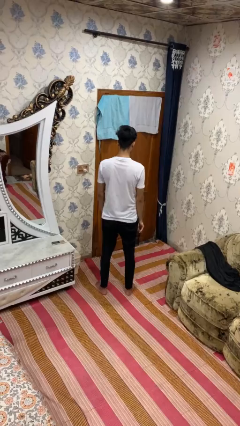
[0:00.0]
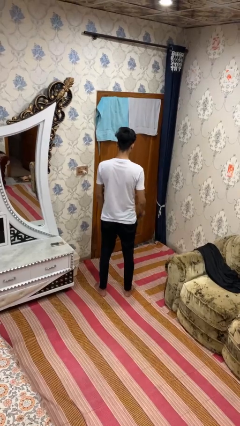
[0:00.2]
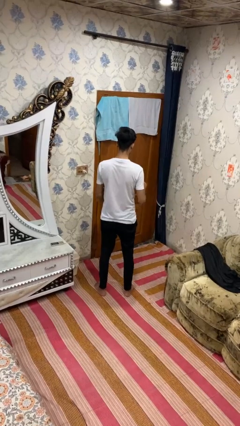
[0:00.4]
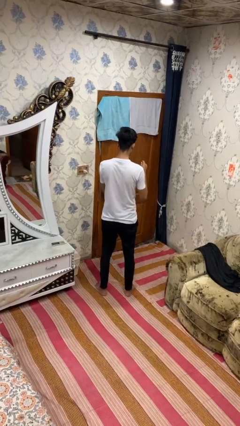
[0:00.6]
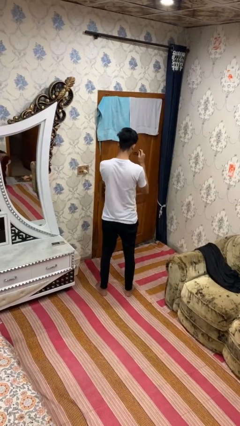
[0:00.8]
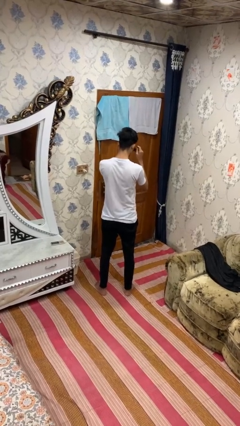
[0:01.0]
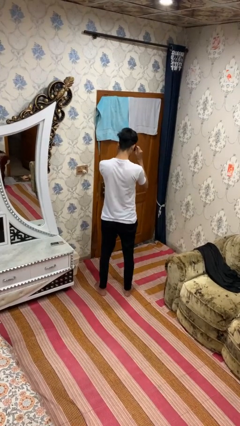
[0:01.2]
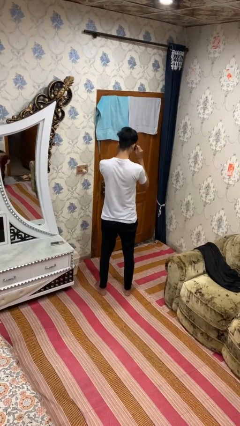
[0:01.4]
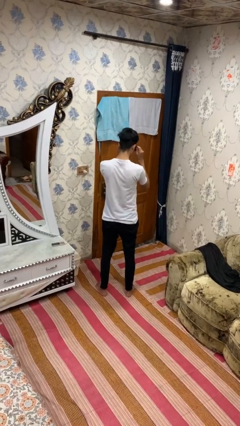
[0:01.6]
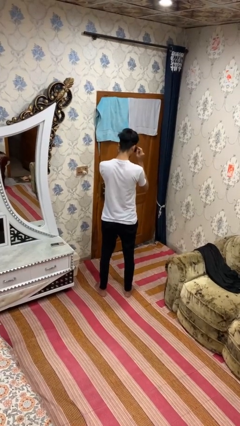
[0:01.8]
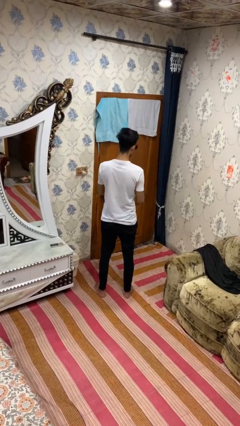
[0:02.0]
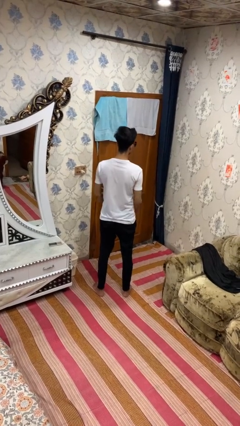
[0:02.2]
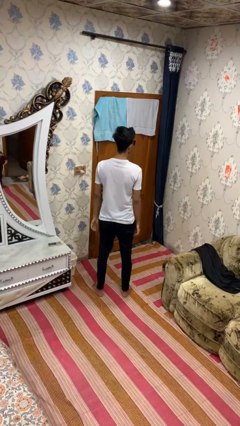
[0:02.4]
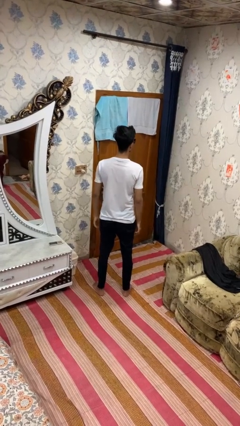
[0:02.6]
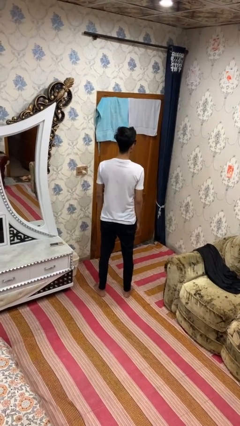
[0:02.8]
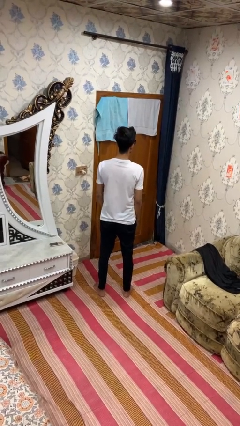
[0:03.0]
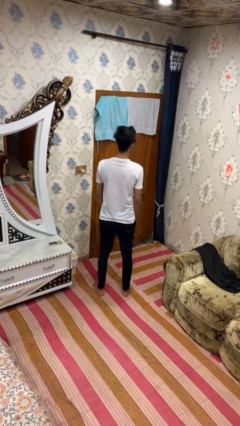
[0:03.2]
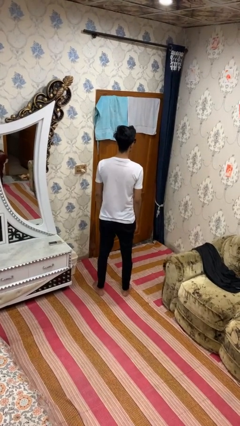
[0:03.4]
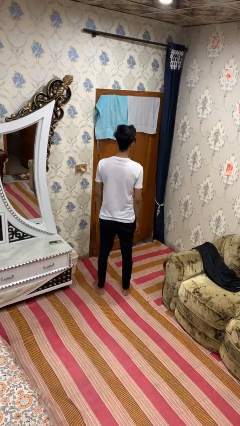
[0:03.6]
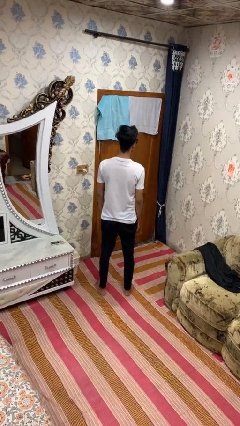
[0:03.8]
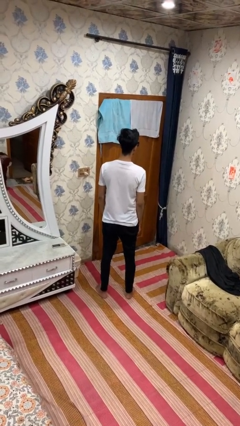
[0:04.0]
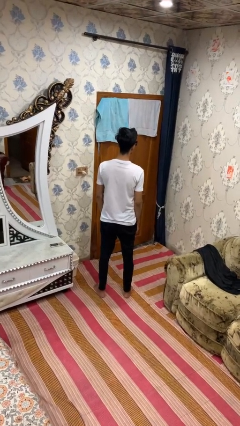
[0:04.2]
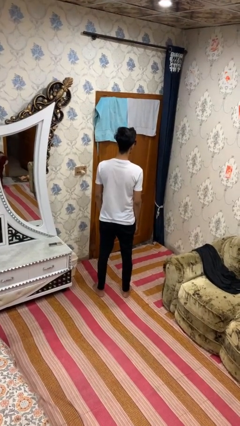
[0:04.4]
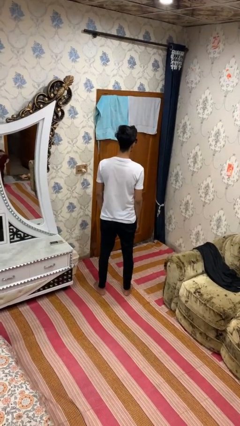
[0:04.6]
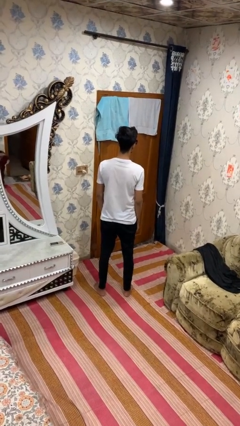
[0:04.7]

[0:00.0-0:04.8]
person puts on sunglasses

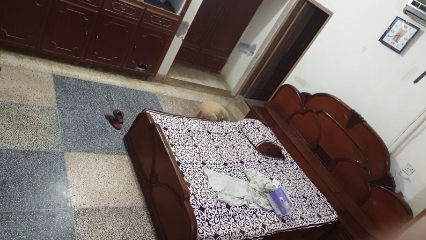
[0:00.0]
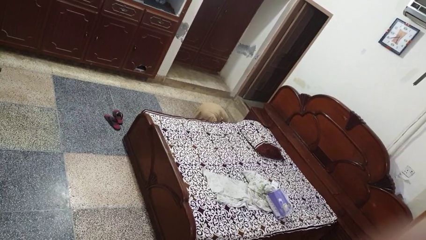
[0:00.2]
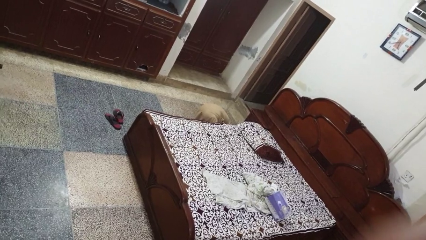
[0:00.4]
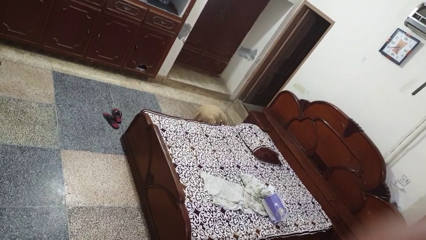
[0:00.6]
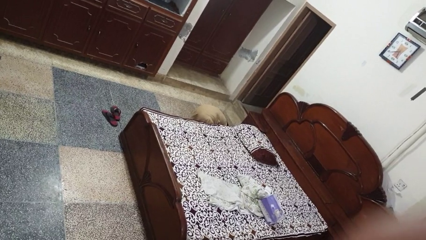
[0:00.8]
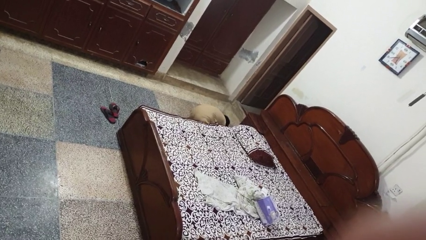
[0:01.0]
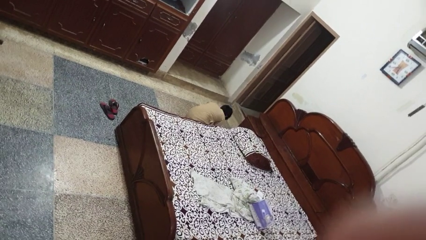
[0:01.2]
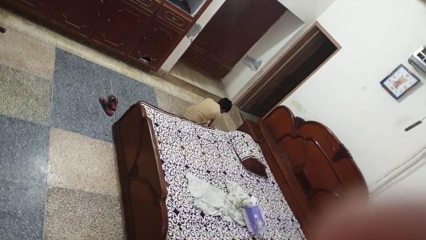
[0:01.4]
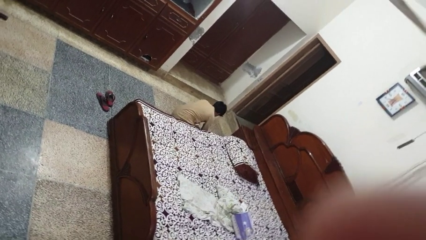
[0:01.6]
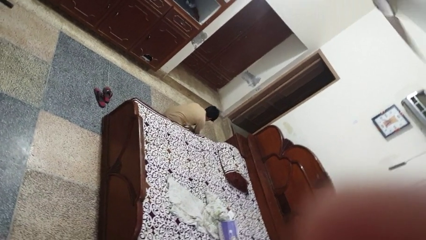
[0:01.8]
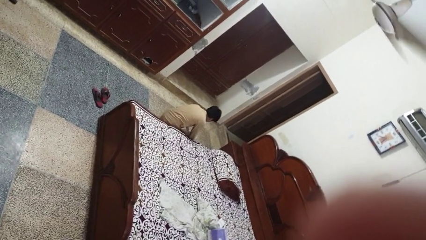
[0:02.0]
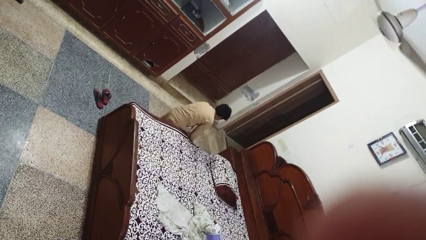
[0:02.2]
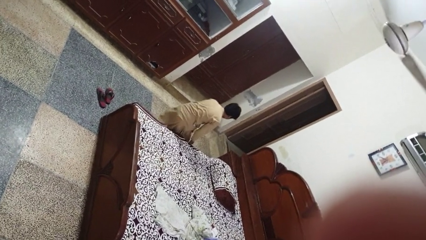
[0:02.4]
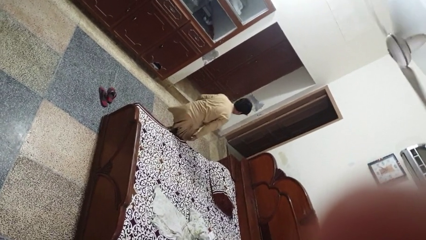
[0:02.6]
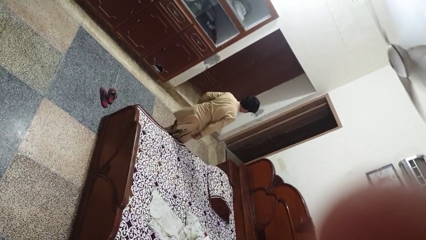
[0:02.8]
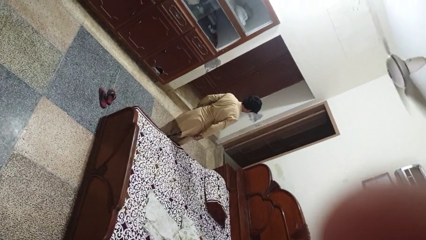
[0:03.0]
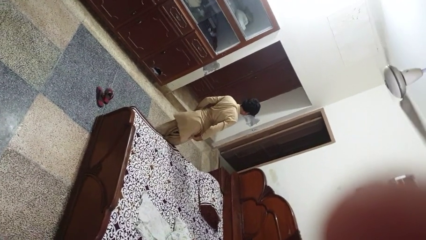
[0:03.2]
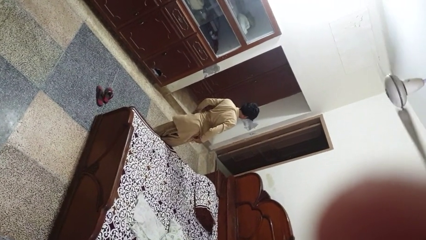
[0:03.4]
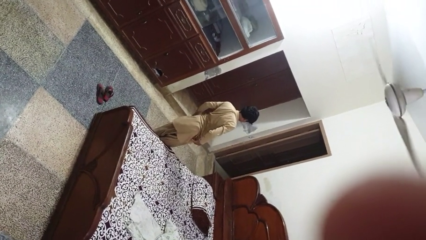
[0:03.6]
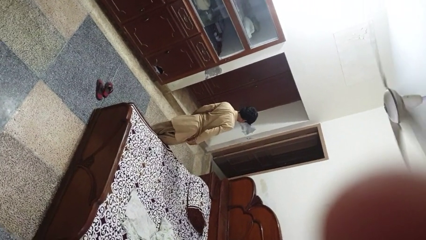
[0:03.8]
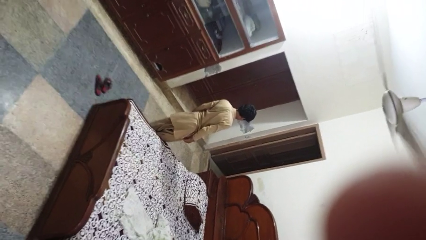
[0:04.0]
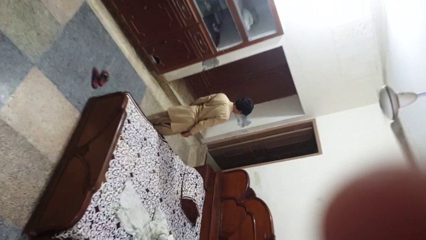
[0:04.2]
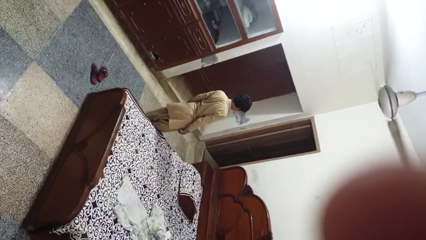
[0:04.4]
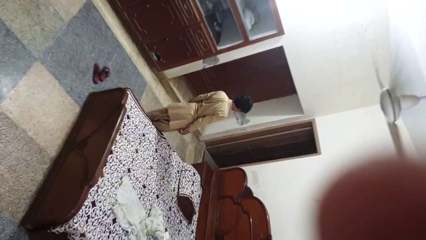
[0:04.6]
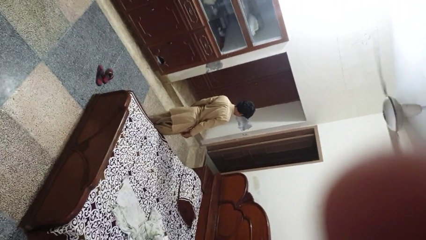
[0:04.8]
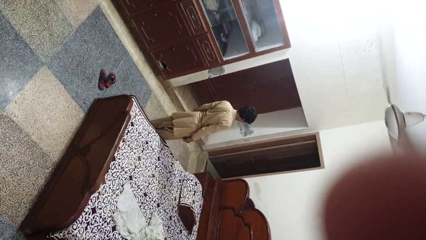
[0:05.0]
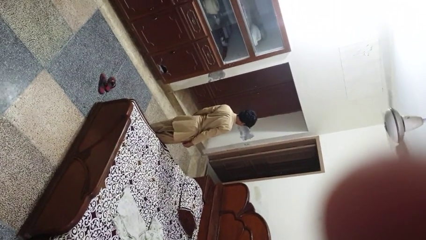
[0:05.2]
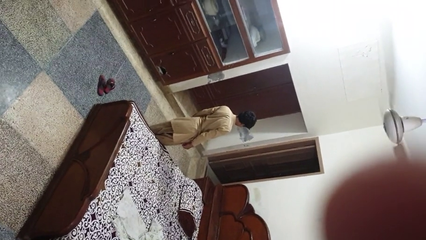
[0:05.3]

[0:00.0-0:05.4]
person stands up from floor

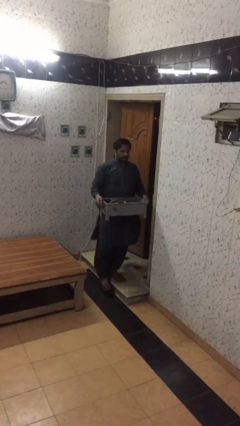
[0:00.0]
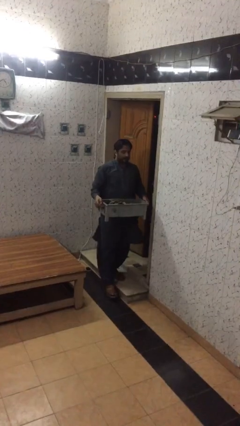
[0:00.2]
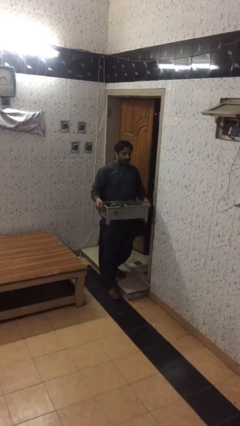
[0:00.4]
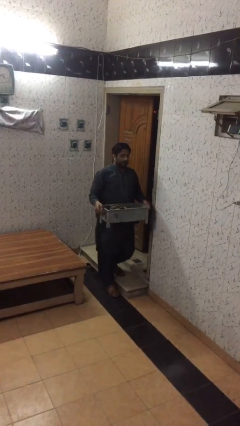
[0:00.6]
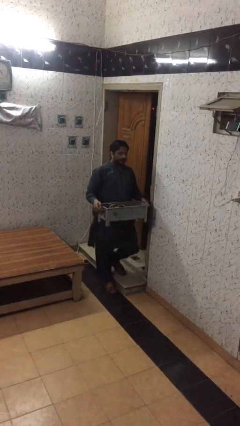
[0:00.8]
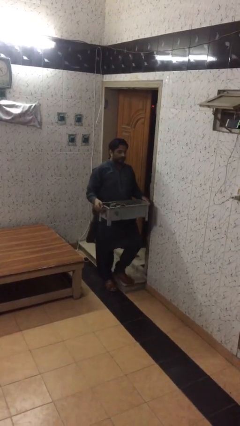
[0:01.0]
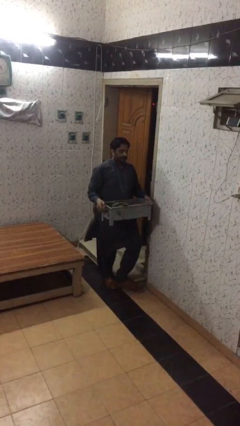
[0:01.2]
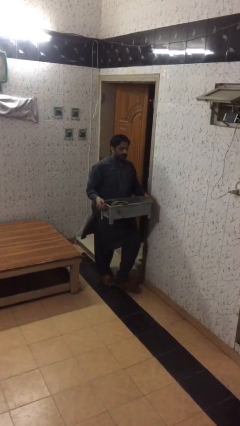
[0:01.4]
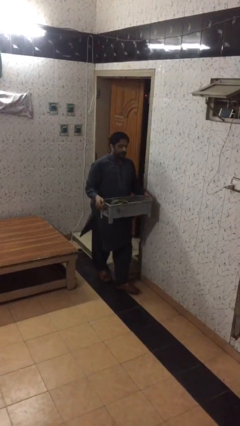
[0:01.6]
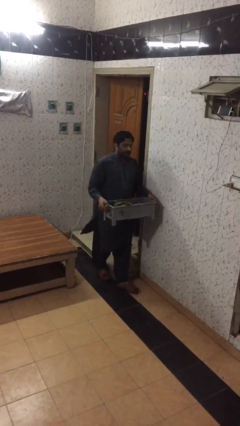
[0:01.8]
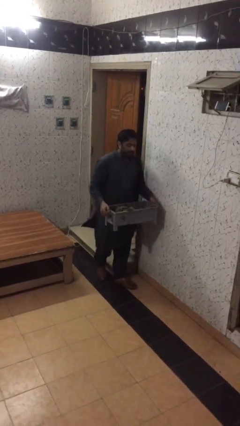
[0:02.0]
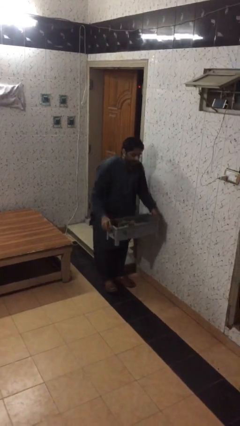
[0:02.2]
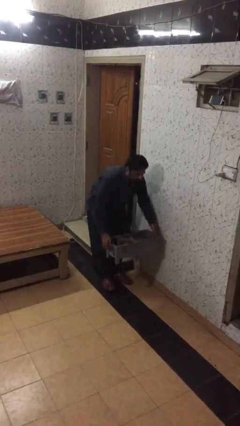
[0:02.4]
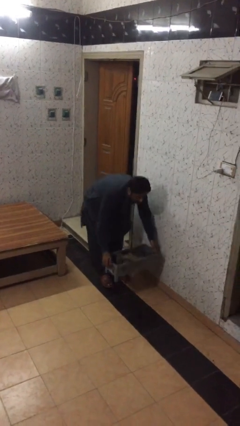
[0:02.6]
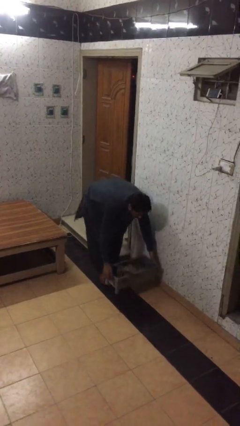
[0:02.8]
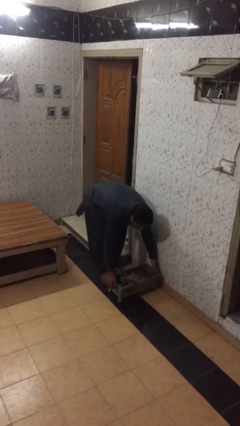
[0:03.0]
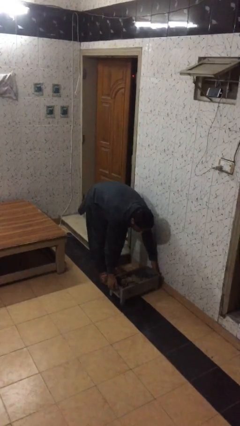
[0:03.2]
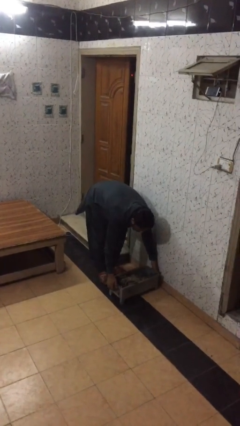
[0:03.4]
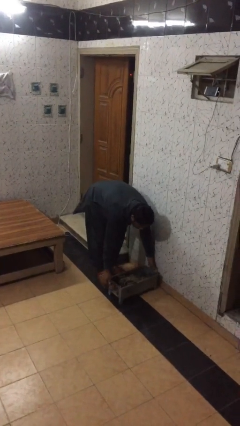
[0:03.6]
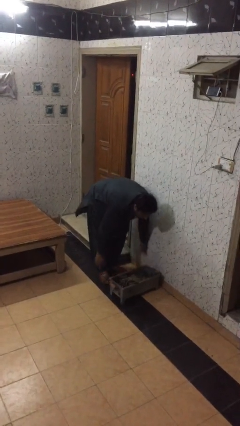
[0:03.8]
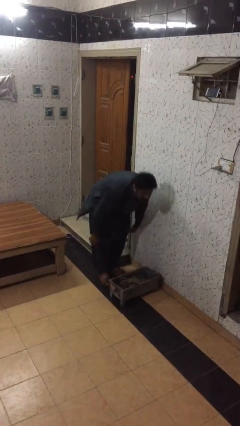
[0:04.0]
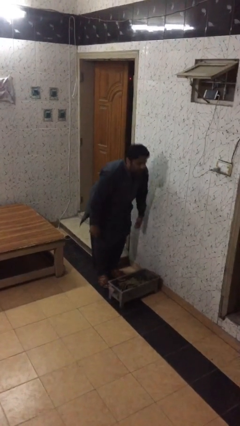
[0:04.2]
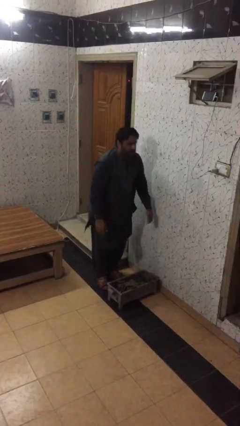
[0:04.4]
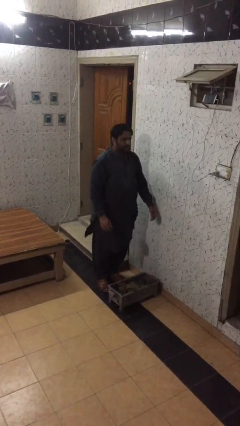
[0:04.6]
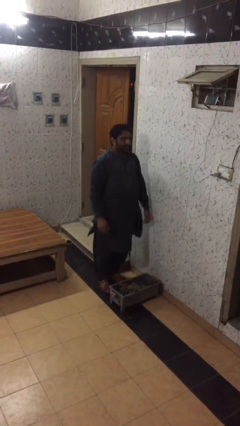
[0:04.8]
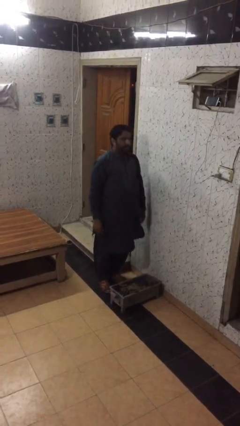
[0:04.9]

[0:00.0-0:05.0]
person puts down object on floor

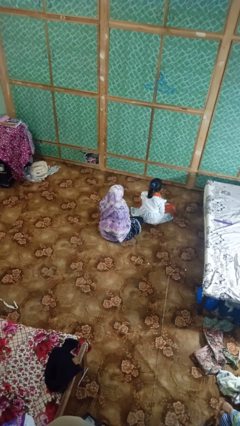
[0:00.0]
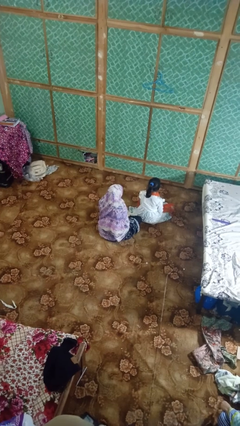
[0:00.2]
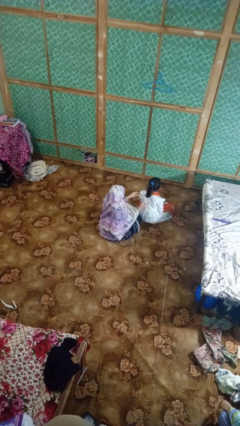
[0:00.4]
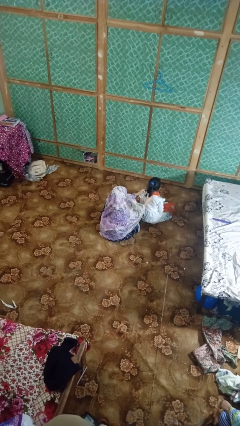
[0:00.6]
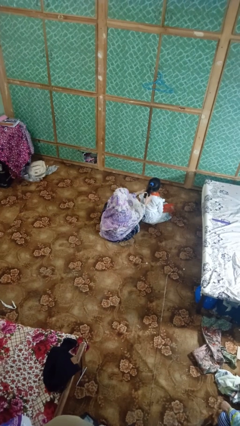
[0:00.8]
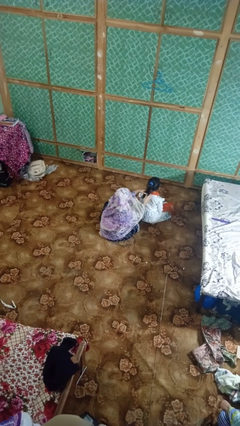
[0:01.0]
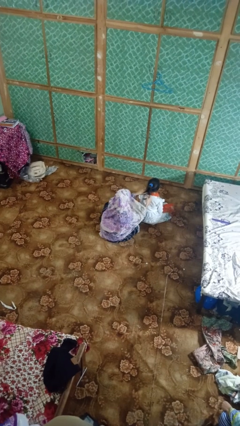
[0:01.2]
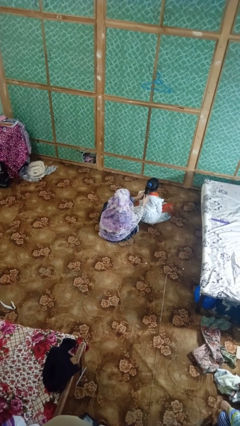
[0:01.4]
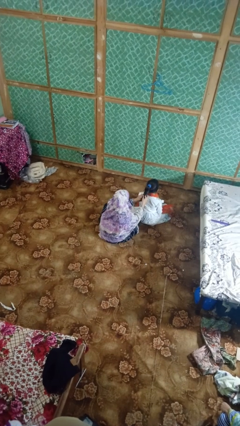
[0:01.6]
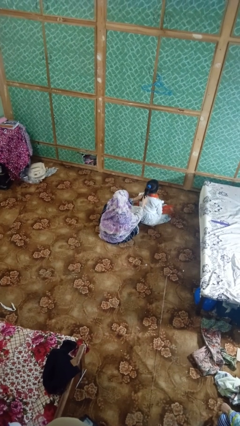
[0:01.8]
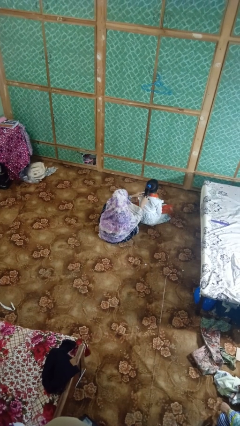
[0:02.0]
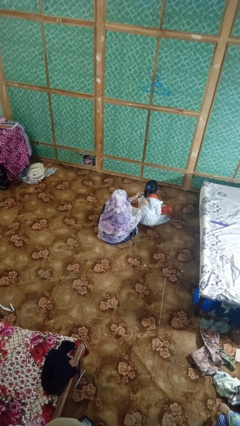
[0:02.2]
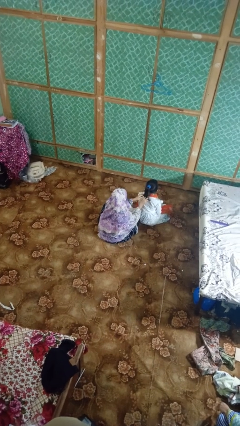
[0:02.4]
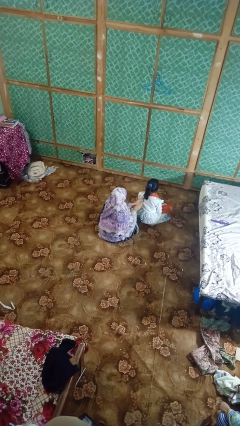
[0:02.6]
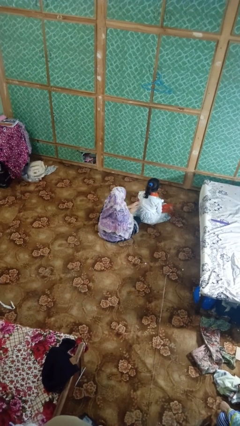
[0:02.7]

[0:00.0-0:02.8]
person braids hair of person
